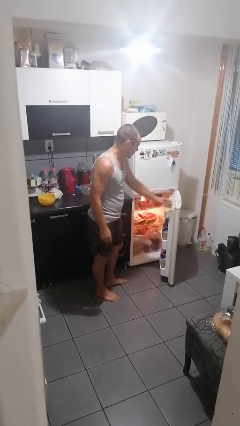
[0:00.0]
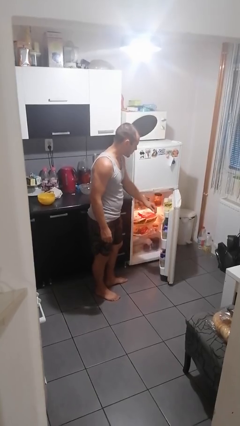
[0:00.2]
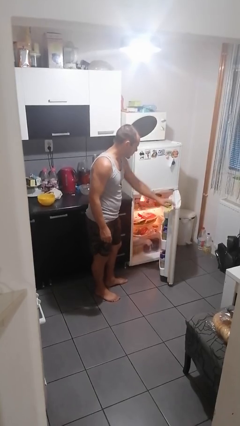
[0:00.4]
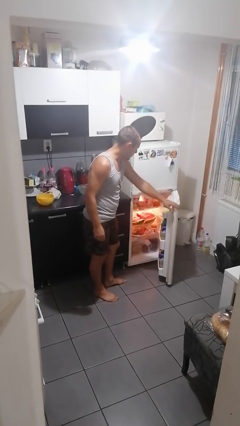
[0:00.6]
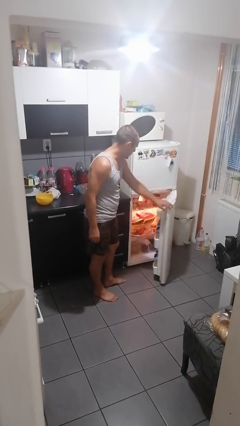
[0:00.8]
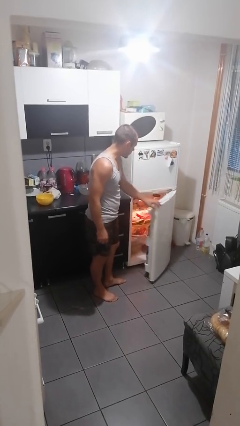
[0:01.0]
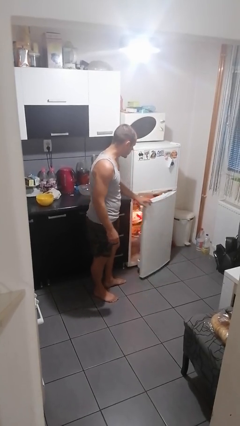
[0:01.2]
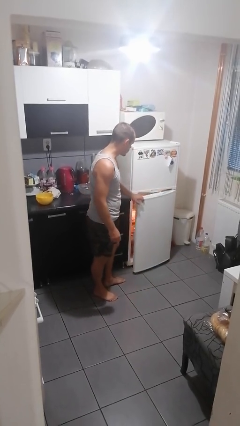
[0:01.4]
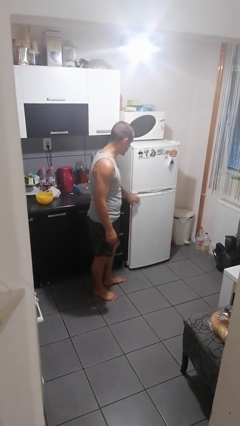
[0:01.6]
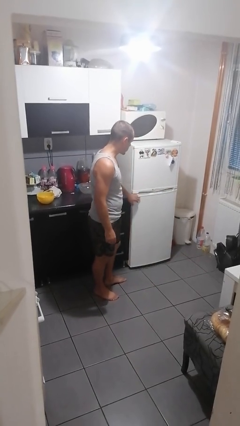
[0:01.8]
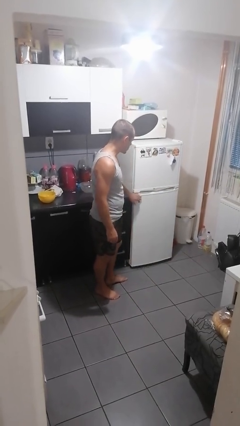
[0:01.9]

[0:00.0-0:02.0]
person closes refrigerator

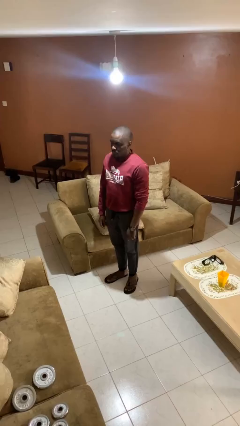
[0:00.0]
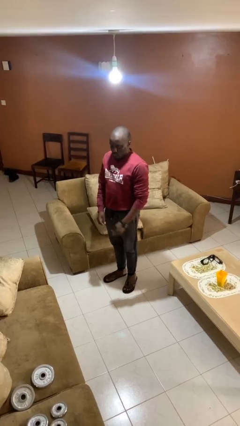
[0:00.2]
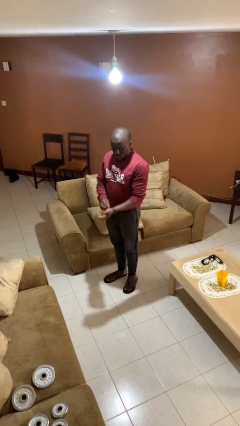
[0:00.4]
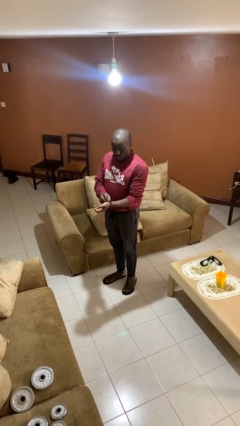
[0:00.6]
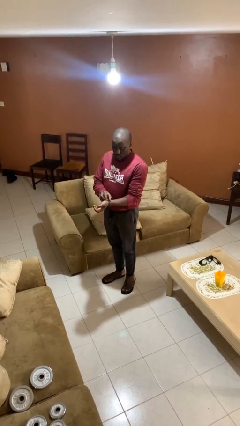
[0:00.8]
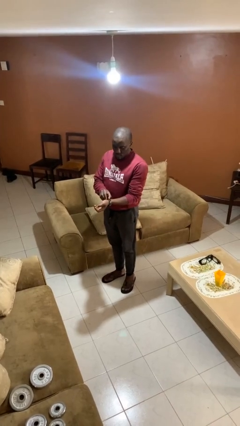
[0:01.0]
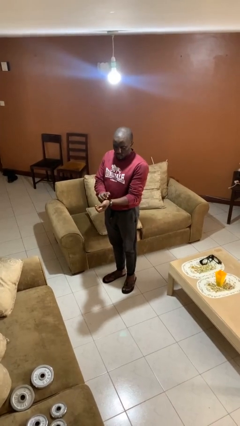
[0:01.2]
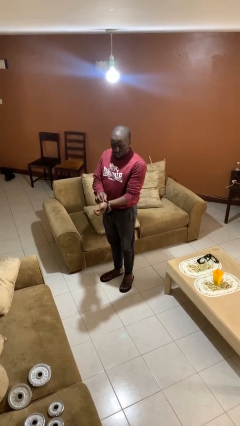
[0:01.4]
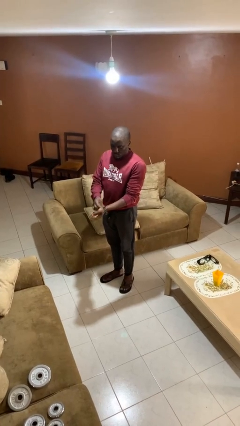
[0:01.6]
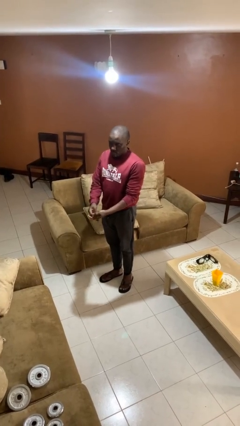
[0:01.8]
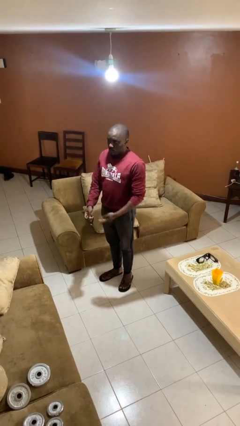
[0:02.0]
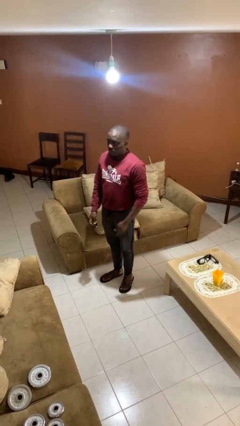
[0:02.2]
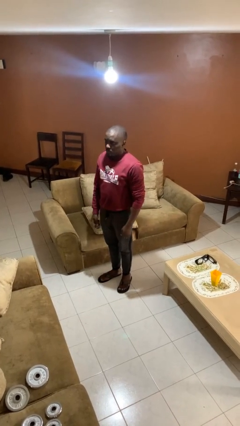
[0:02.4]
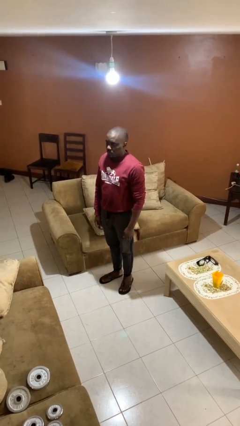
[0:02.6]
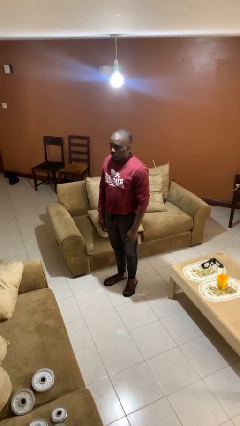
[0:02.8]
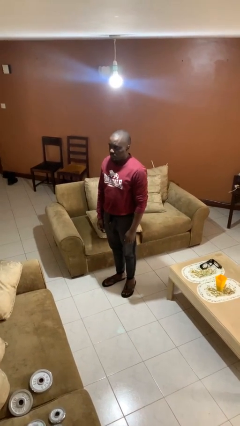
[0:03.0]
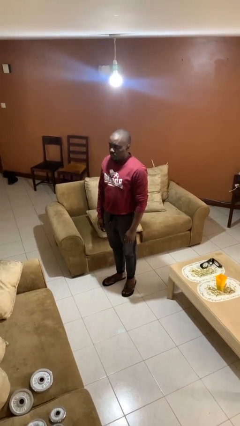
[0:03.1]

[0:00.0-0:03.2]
person takes off wristwatch

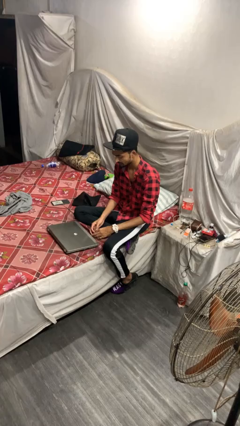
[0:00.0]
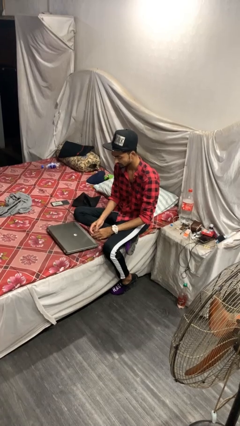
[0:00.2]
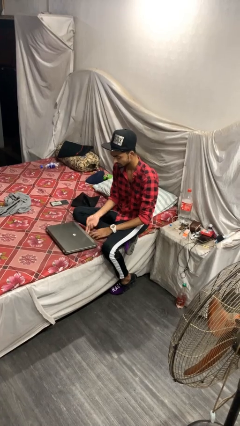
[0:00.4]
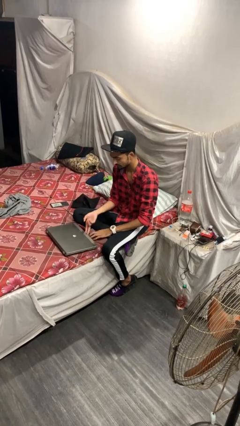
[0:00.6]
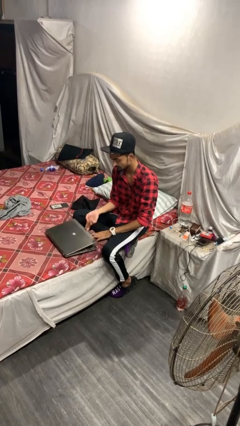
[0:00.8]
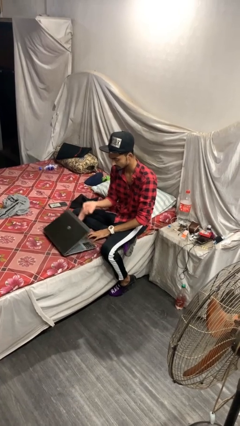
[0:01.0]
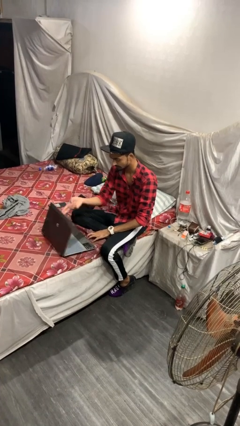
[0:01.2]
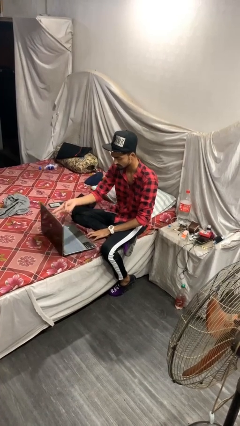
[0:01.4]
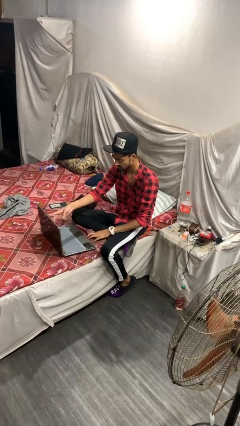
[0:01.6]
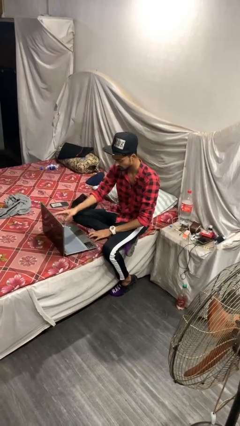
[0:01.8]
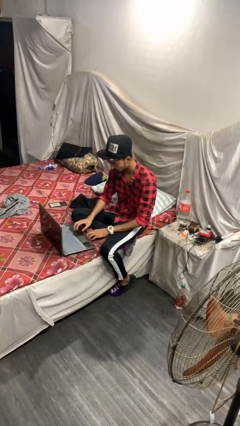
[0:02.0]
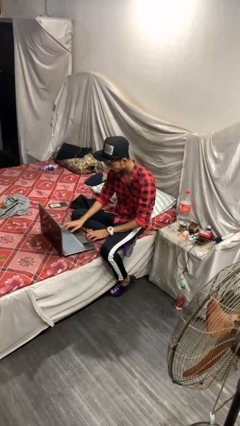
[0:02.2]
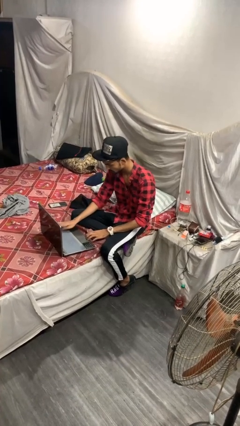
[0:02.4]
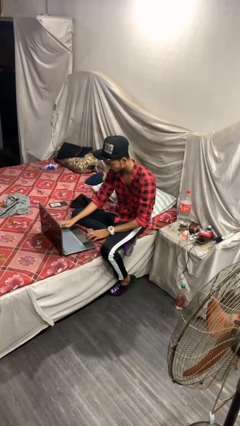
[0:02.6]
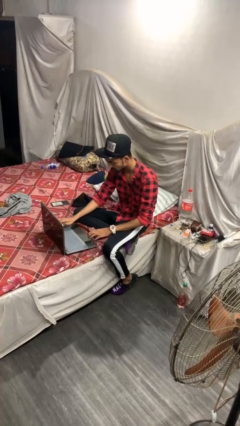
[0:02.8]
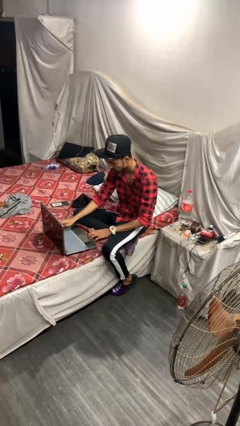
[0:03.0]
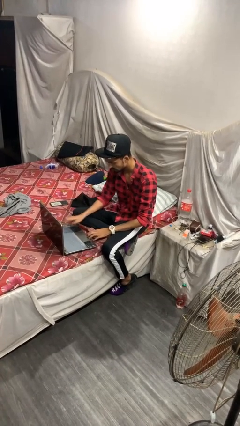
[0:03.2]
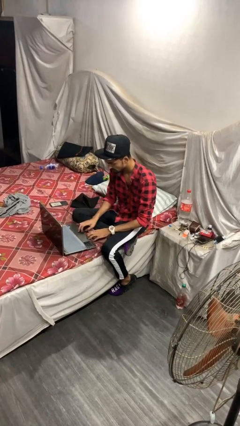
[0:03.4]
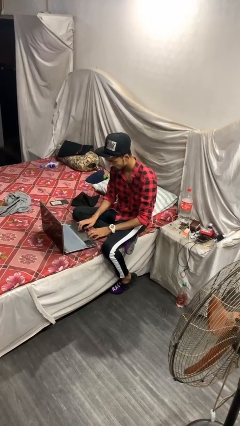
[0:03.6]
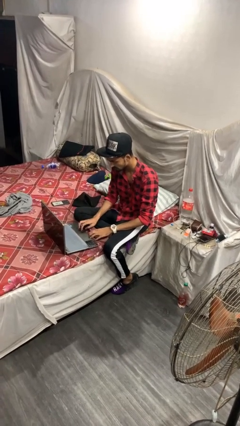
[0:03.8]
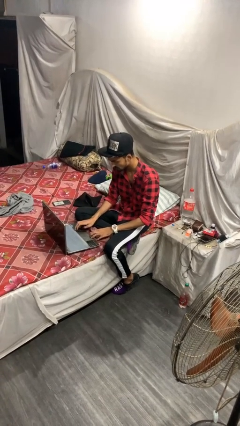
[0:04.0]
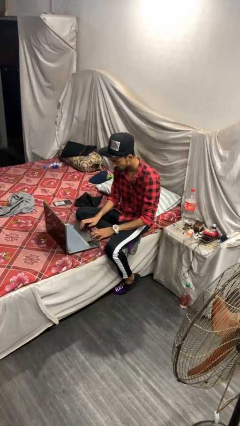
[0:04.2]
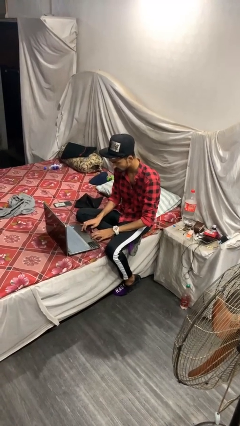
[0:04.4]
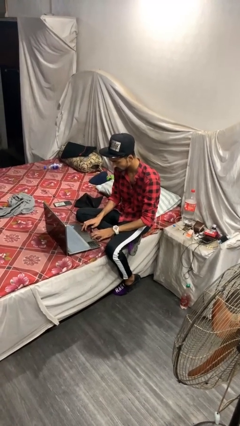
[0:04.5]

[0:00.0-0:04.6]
person opens laptop

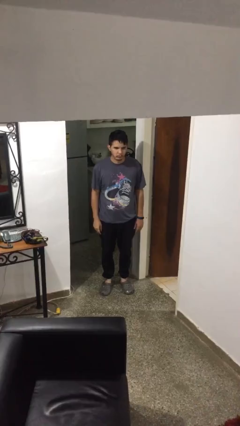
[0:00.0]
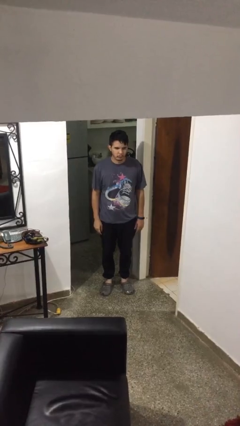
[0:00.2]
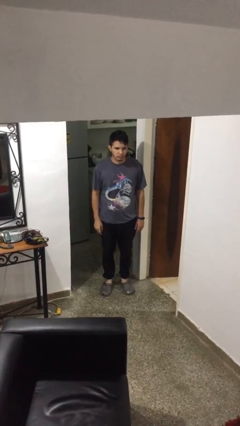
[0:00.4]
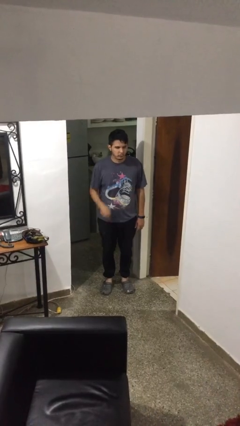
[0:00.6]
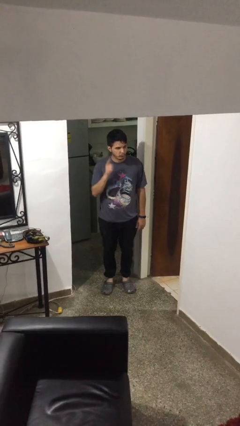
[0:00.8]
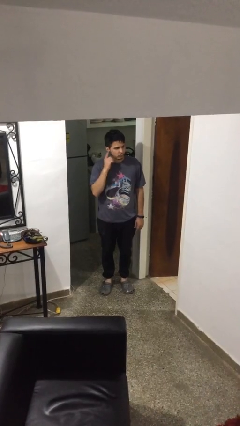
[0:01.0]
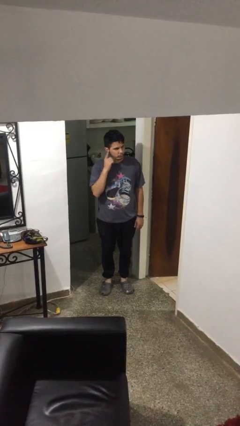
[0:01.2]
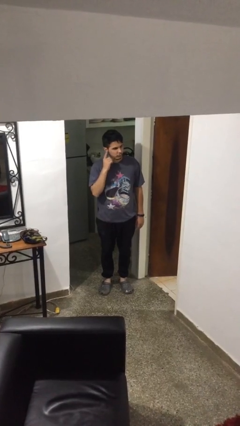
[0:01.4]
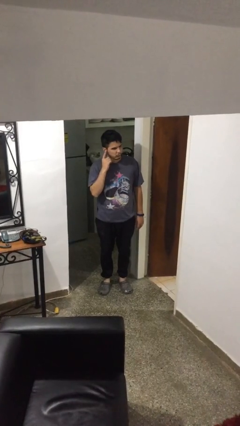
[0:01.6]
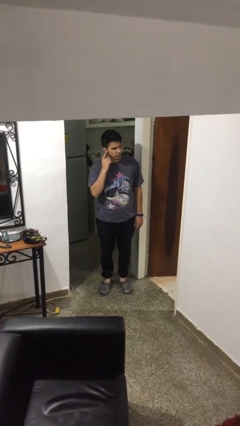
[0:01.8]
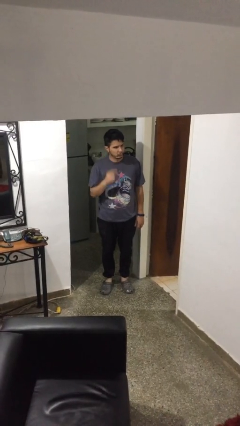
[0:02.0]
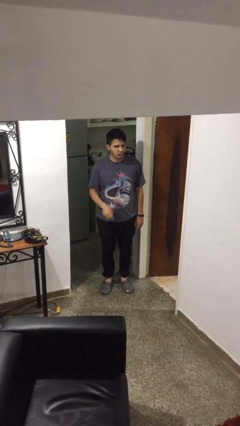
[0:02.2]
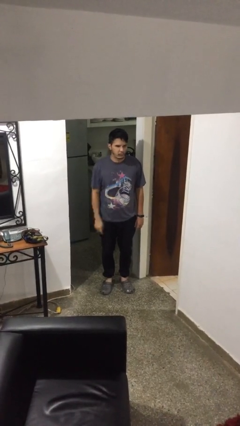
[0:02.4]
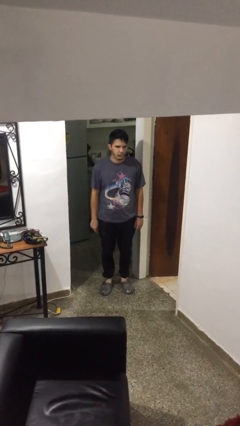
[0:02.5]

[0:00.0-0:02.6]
person gestures listen closely

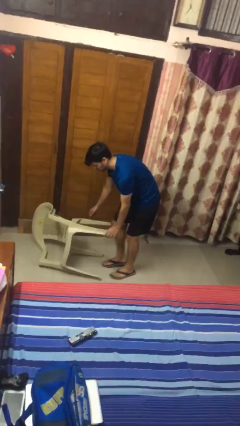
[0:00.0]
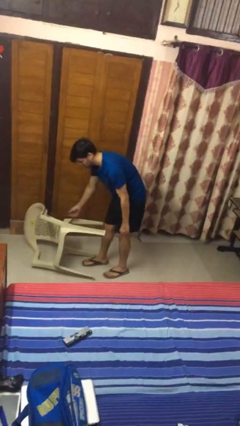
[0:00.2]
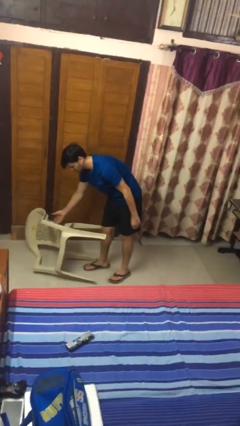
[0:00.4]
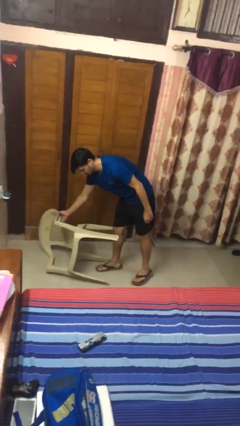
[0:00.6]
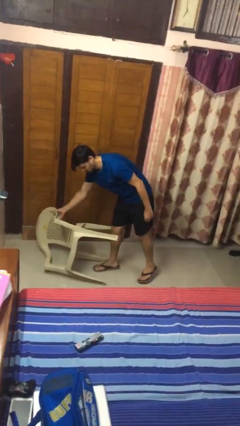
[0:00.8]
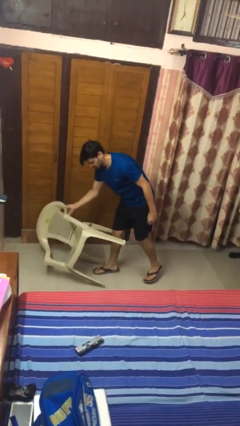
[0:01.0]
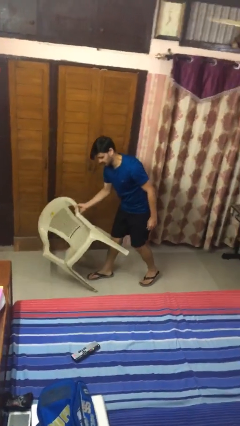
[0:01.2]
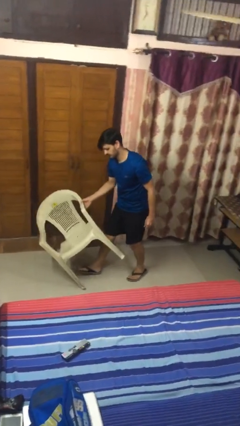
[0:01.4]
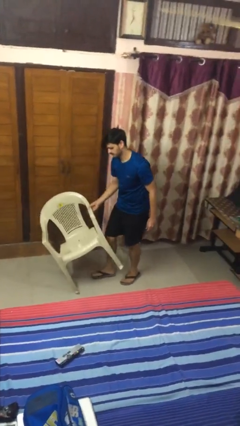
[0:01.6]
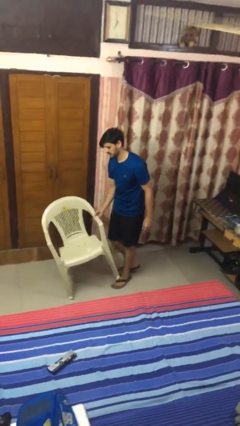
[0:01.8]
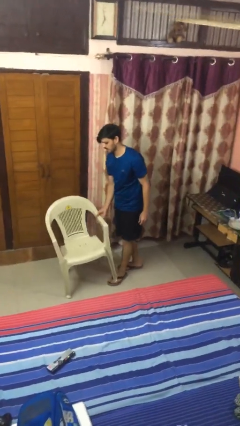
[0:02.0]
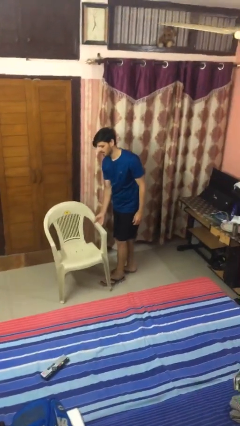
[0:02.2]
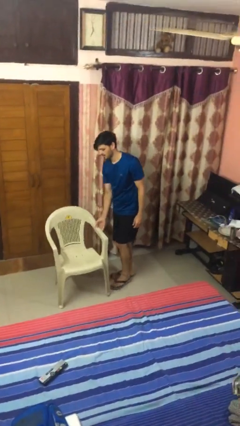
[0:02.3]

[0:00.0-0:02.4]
person sets upright furniture

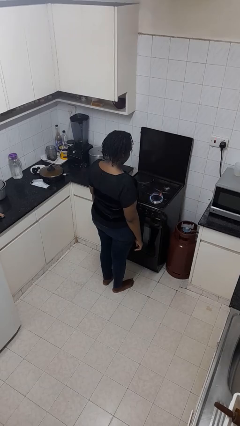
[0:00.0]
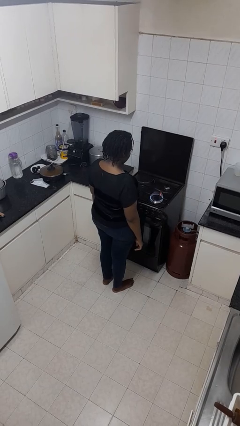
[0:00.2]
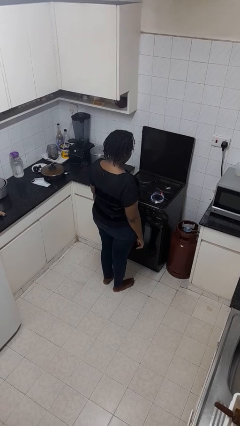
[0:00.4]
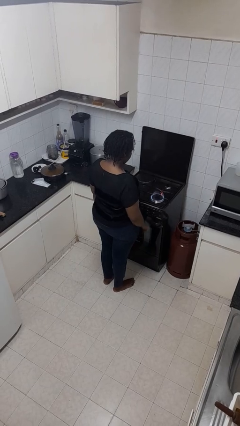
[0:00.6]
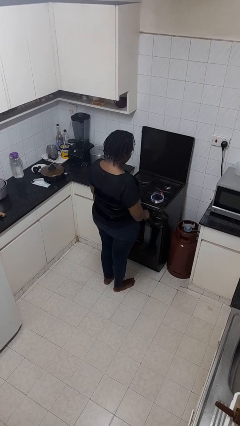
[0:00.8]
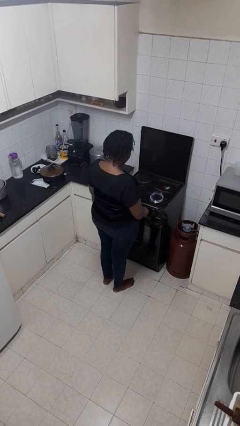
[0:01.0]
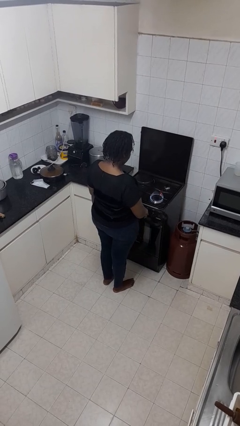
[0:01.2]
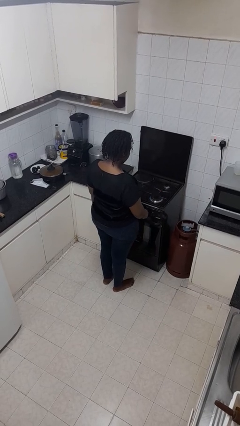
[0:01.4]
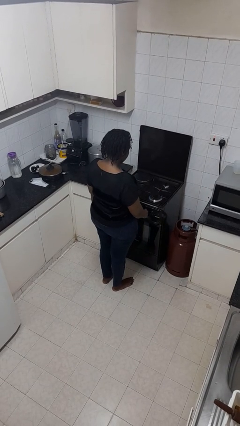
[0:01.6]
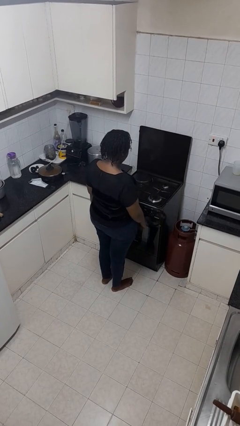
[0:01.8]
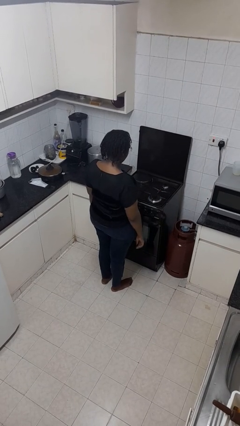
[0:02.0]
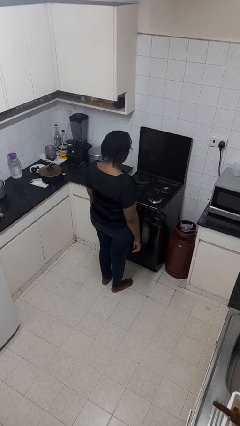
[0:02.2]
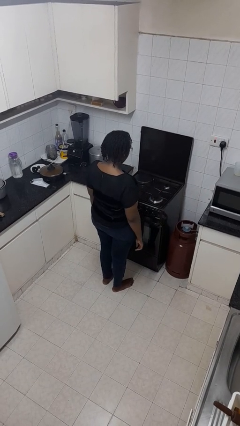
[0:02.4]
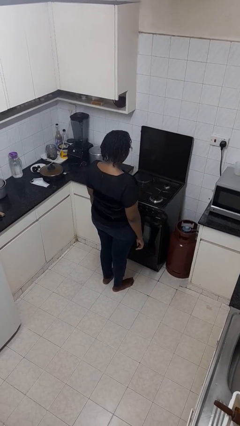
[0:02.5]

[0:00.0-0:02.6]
person turns off stovetop
